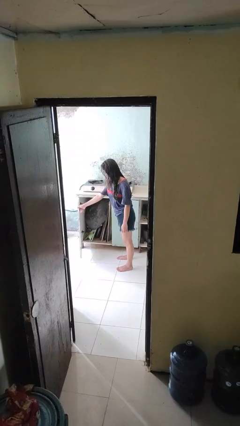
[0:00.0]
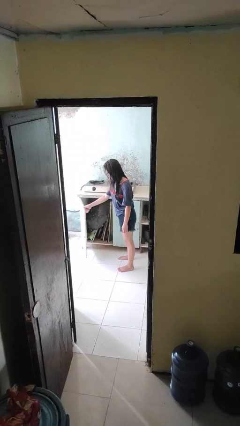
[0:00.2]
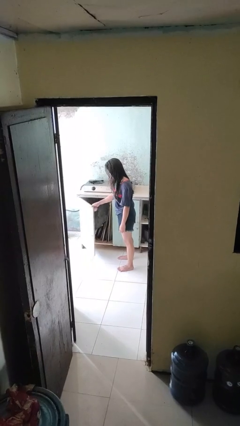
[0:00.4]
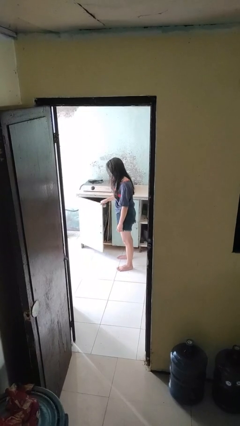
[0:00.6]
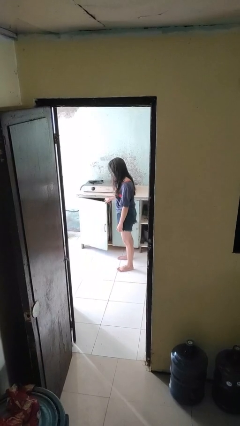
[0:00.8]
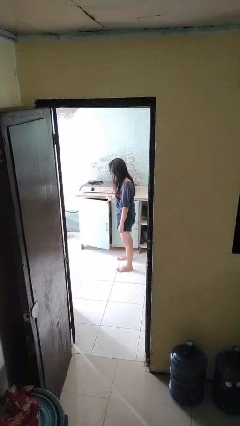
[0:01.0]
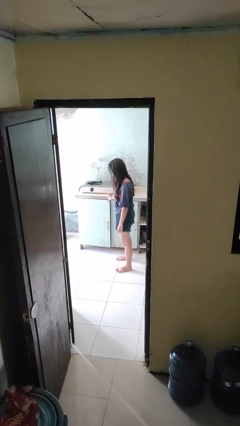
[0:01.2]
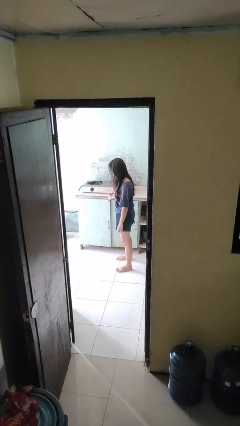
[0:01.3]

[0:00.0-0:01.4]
person closes cabinet

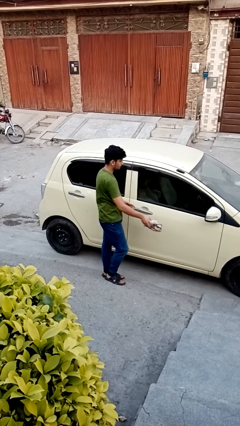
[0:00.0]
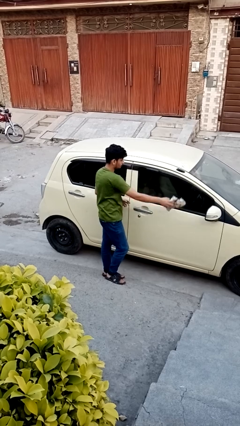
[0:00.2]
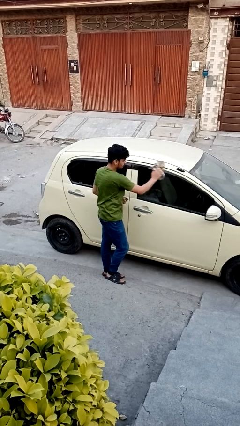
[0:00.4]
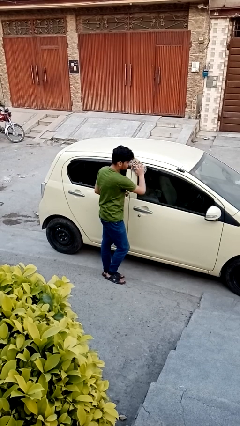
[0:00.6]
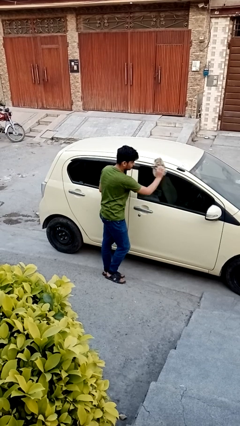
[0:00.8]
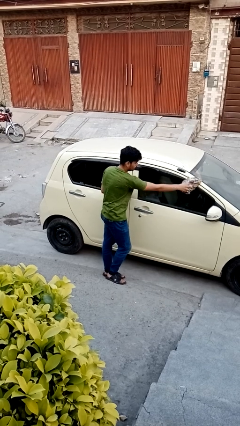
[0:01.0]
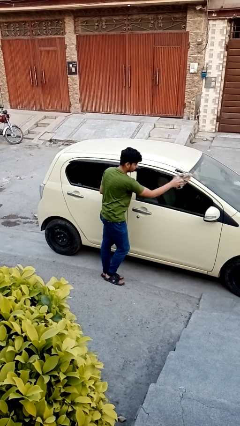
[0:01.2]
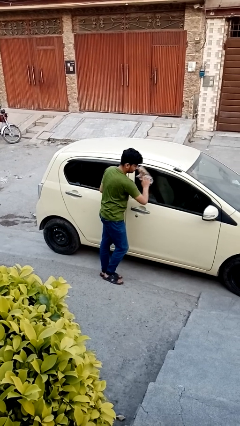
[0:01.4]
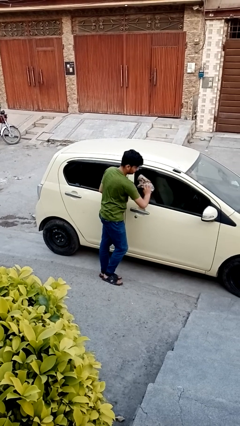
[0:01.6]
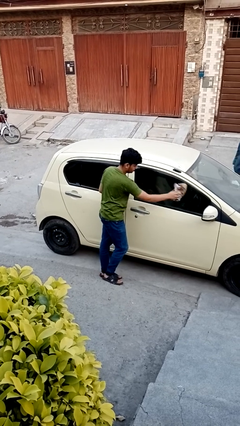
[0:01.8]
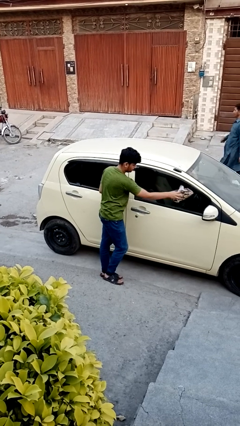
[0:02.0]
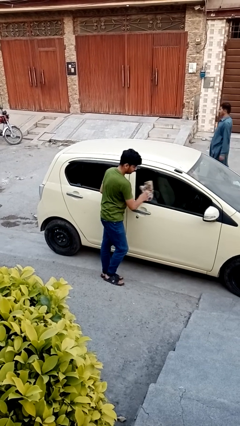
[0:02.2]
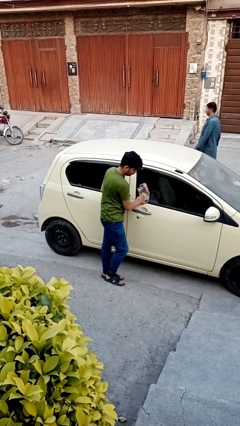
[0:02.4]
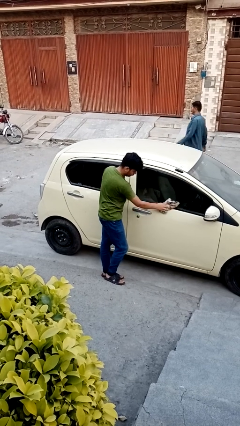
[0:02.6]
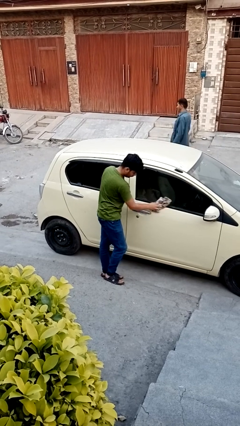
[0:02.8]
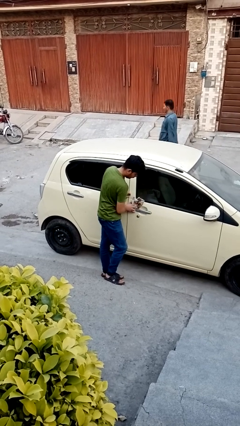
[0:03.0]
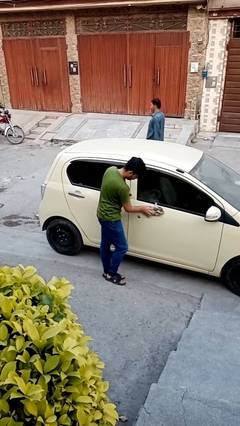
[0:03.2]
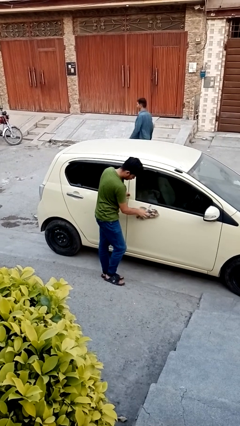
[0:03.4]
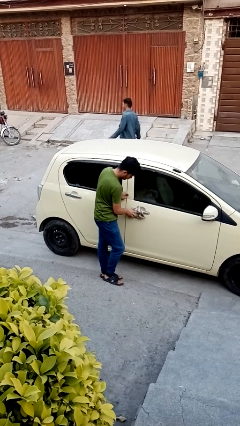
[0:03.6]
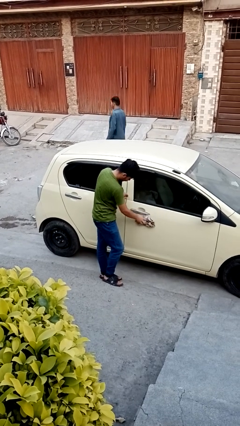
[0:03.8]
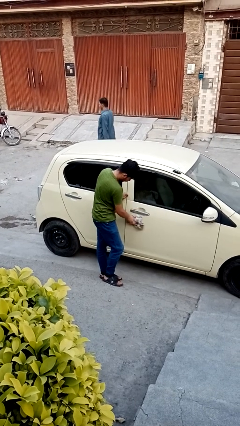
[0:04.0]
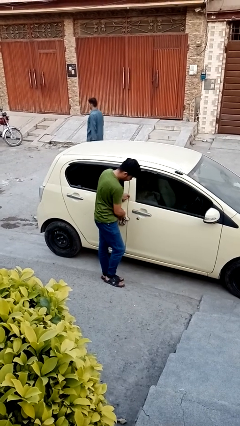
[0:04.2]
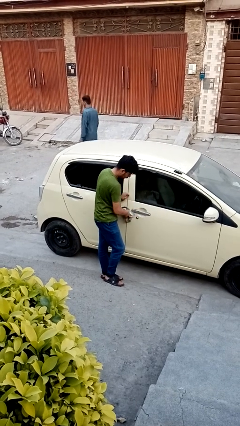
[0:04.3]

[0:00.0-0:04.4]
person polishes car with rag

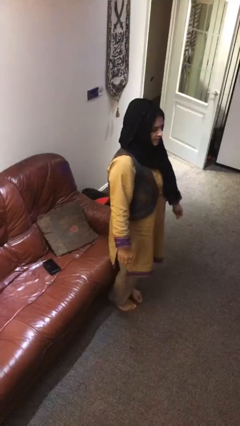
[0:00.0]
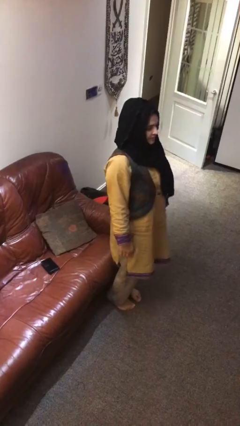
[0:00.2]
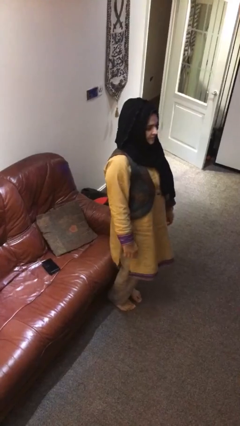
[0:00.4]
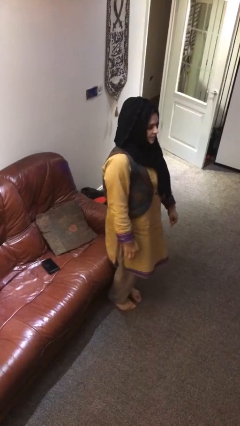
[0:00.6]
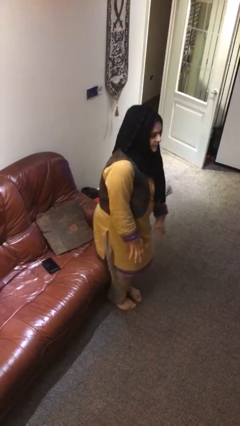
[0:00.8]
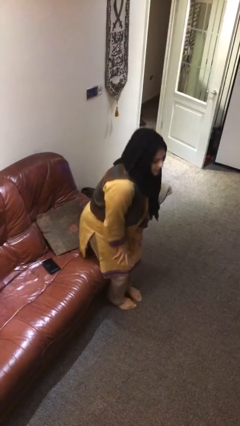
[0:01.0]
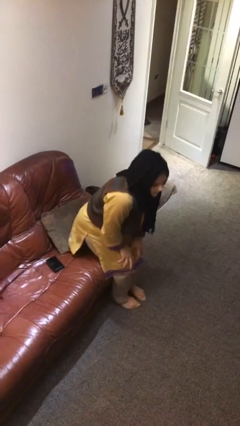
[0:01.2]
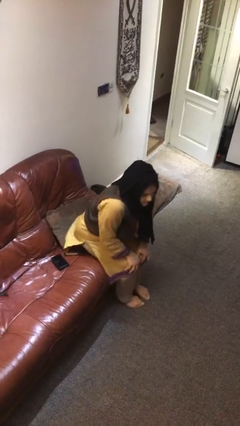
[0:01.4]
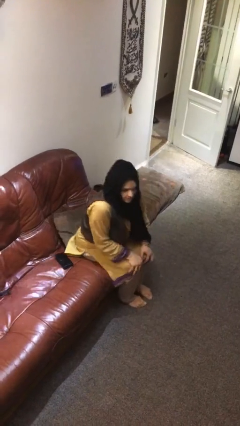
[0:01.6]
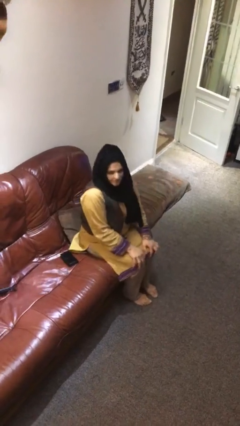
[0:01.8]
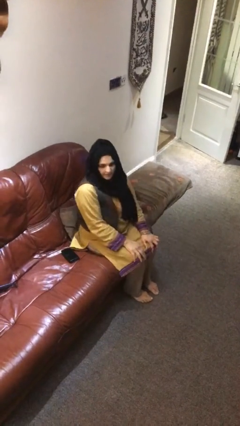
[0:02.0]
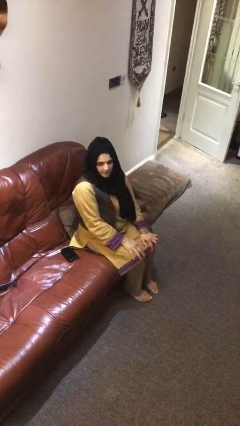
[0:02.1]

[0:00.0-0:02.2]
person sits down

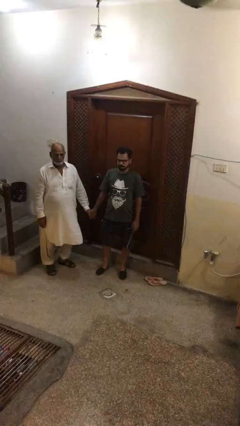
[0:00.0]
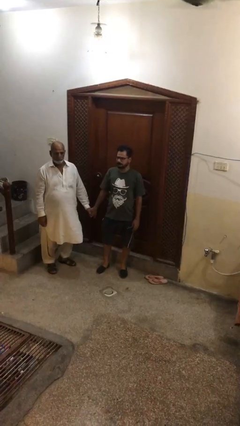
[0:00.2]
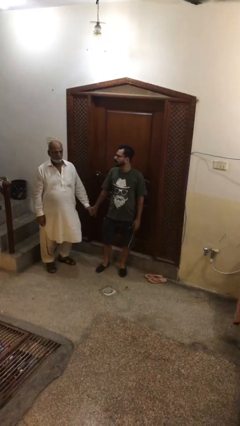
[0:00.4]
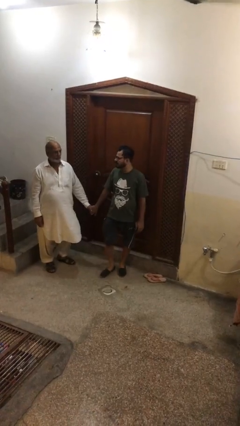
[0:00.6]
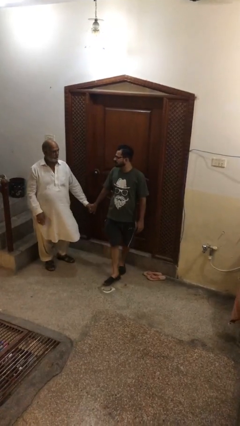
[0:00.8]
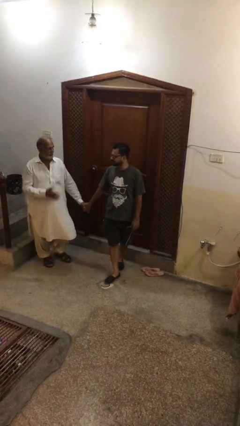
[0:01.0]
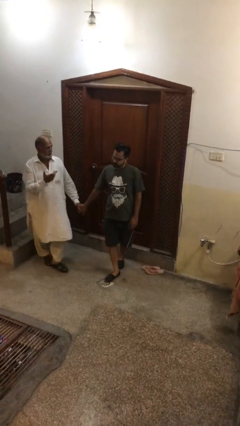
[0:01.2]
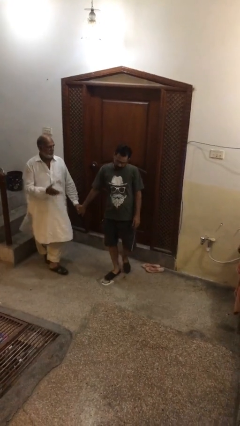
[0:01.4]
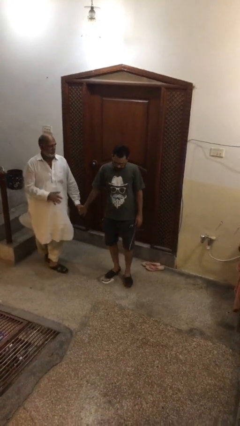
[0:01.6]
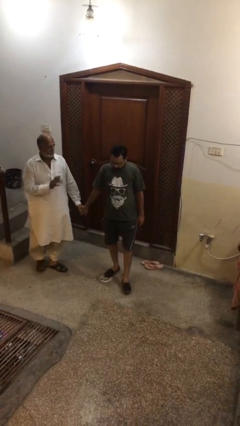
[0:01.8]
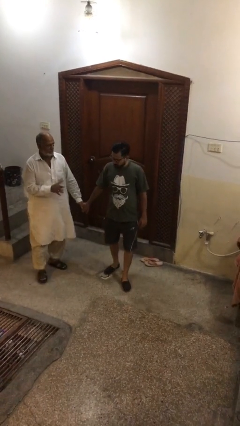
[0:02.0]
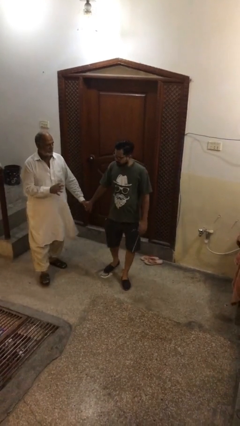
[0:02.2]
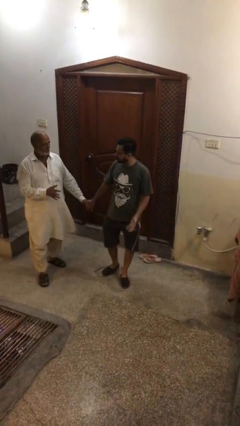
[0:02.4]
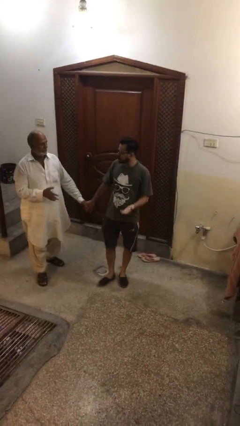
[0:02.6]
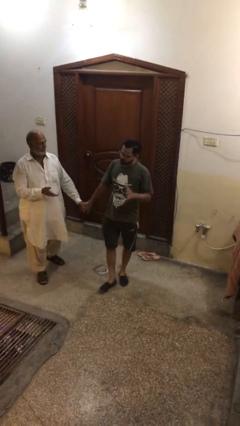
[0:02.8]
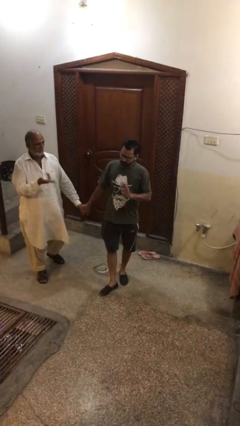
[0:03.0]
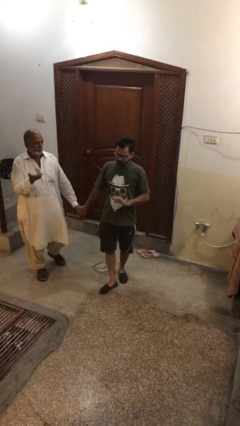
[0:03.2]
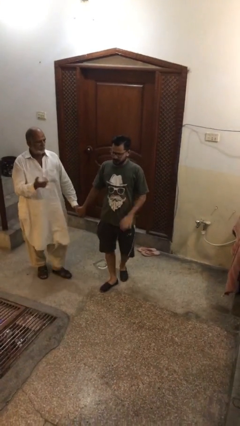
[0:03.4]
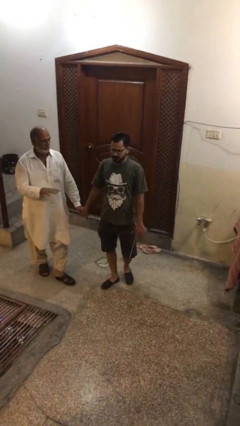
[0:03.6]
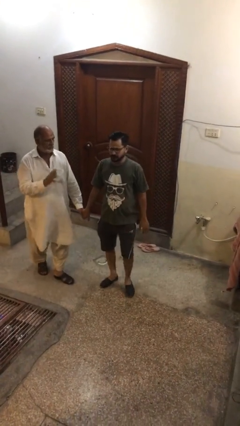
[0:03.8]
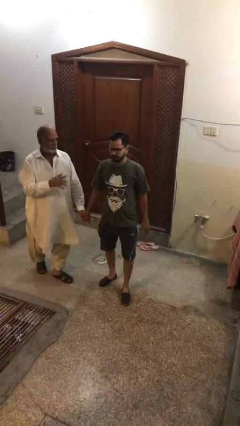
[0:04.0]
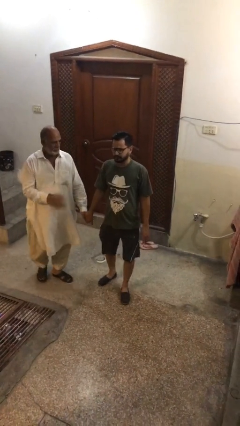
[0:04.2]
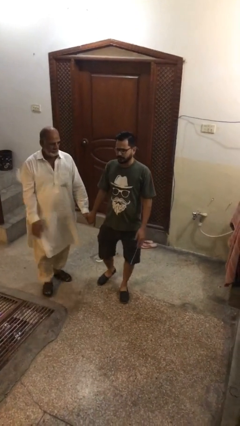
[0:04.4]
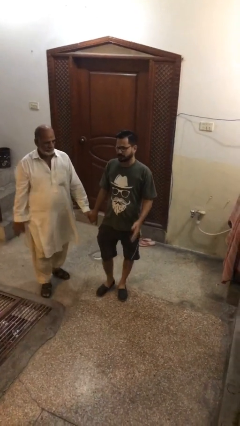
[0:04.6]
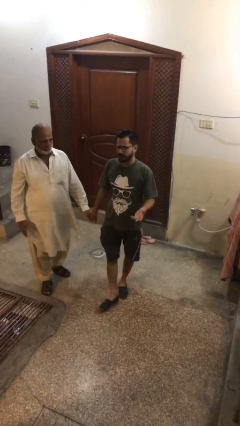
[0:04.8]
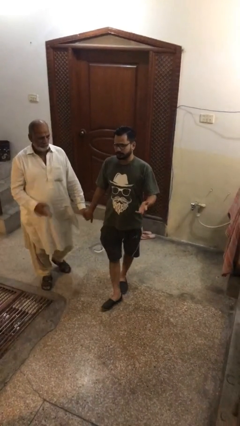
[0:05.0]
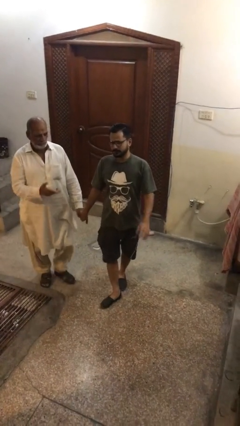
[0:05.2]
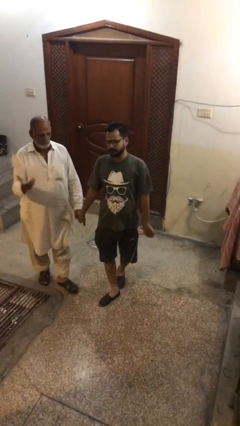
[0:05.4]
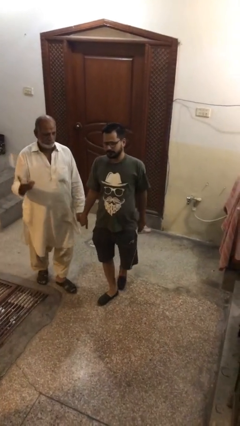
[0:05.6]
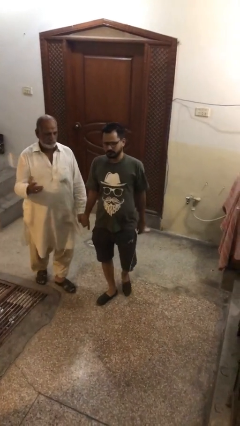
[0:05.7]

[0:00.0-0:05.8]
person holds hand

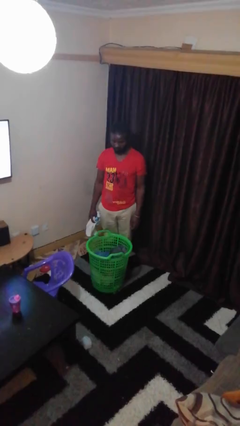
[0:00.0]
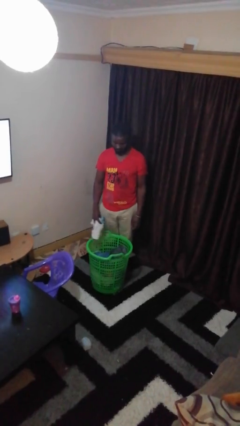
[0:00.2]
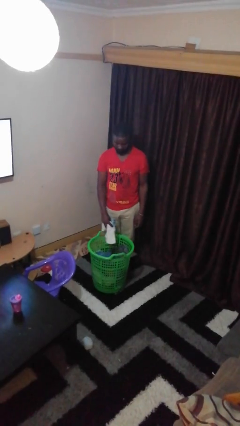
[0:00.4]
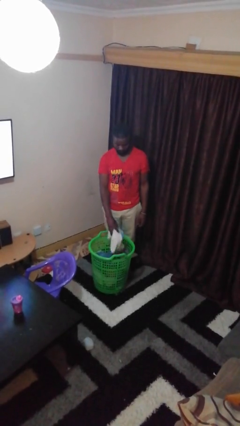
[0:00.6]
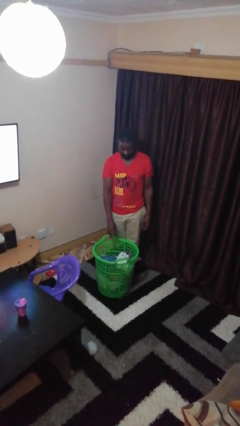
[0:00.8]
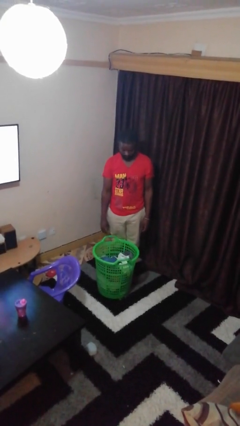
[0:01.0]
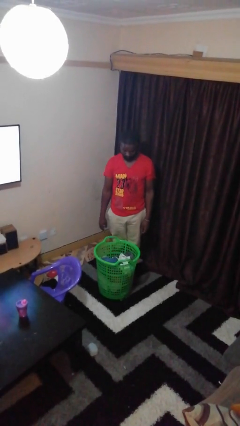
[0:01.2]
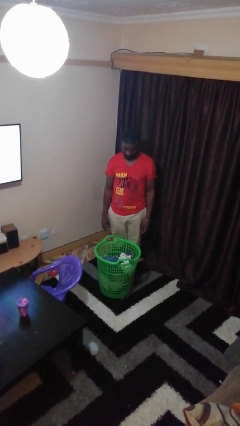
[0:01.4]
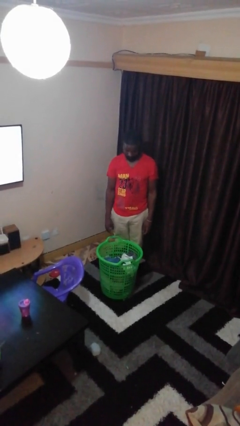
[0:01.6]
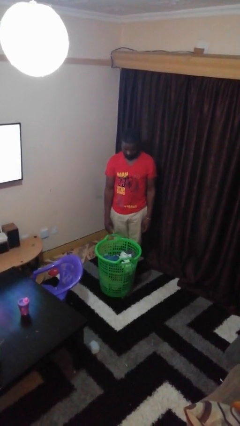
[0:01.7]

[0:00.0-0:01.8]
person puts object into basket

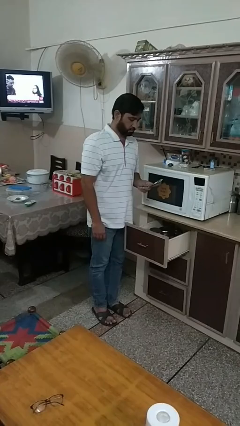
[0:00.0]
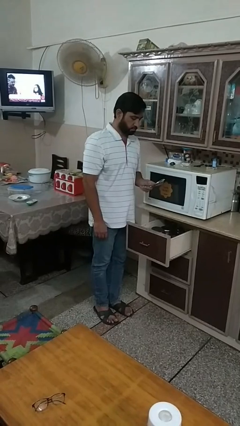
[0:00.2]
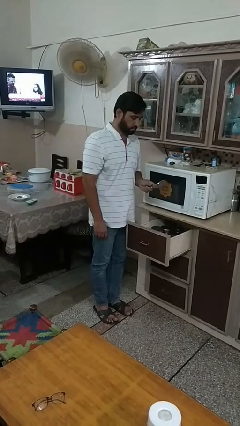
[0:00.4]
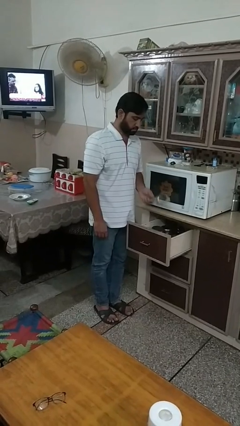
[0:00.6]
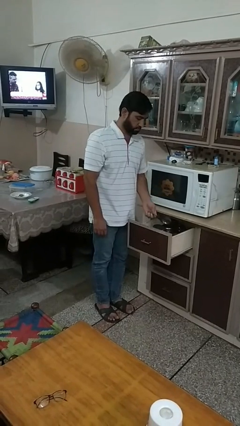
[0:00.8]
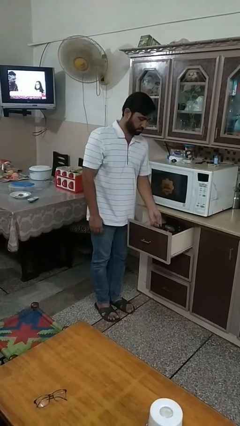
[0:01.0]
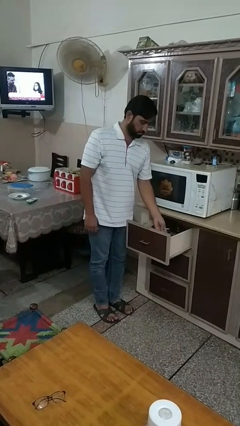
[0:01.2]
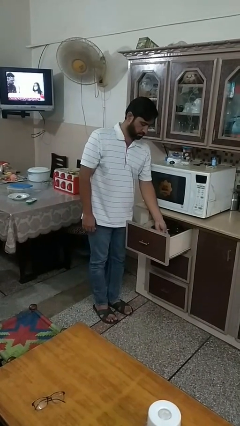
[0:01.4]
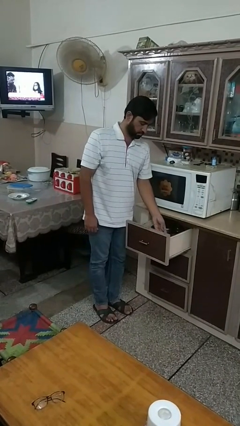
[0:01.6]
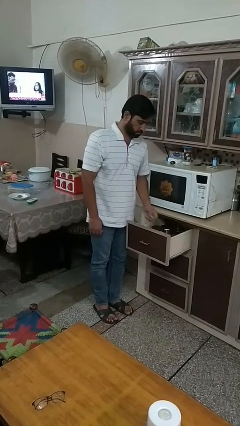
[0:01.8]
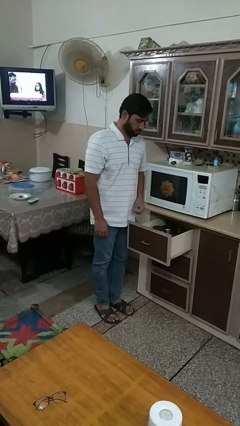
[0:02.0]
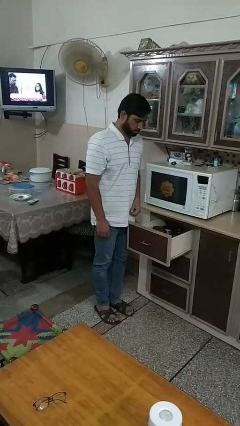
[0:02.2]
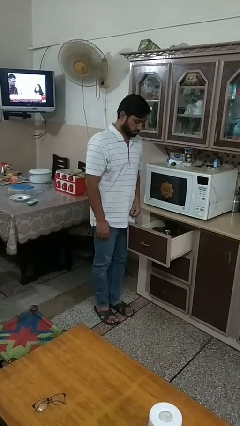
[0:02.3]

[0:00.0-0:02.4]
person puts object into kitchen drawer
